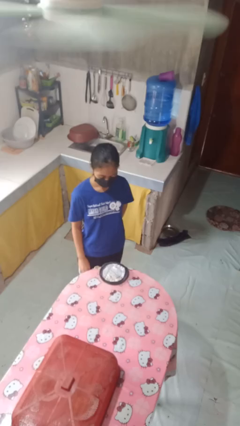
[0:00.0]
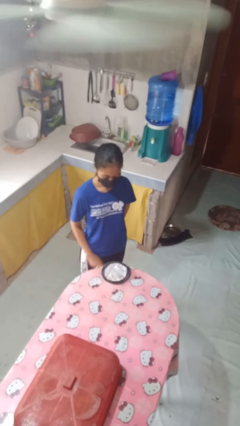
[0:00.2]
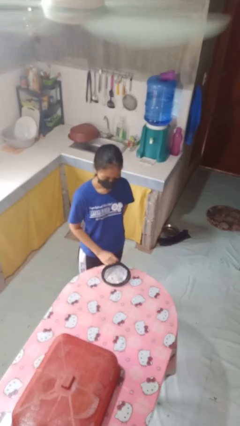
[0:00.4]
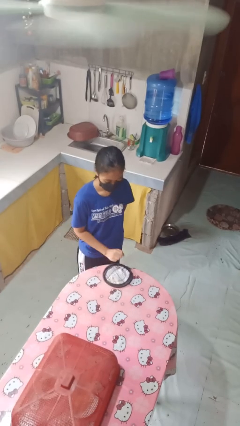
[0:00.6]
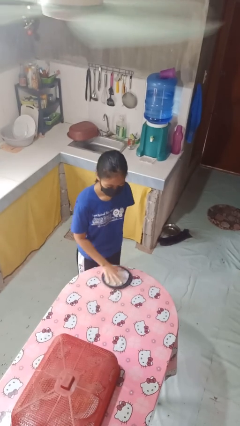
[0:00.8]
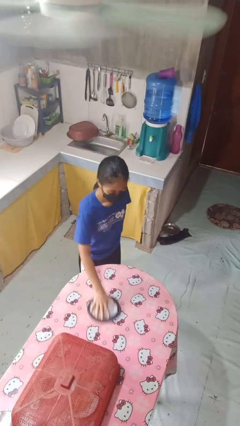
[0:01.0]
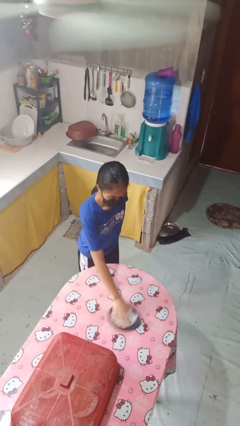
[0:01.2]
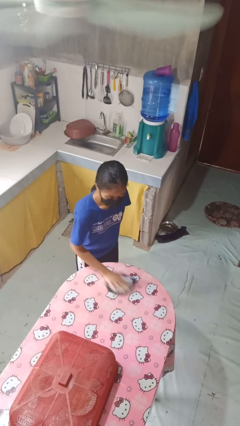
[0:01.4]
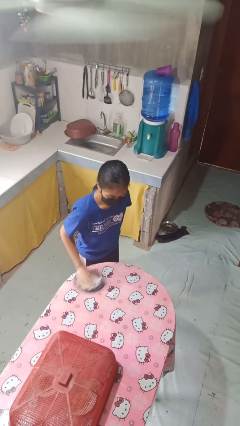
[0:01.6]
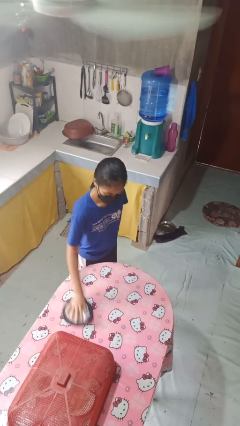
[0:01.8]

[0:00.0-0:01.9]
person cleans table with rag

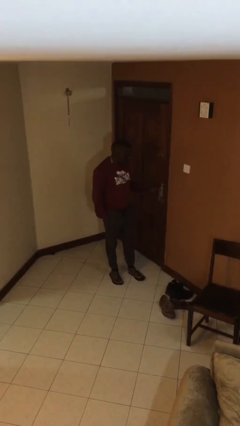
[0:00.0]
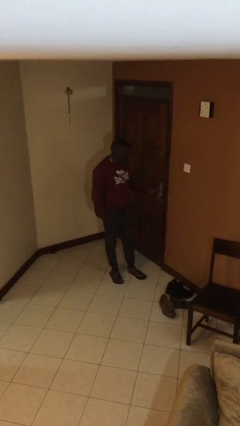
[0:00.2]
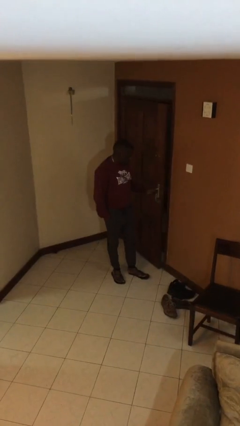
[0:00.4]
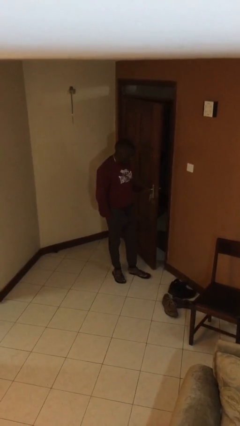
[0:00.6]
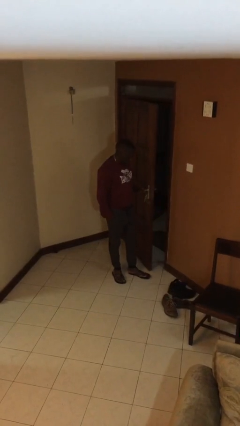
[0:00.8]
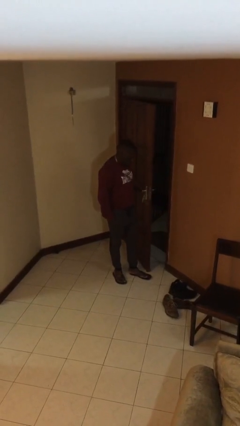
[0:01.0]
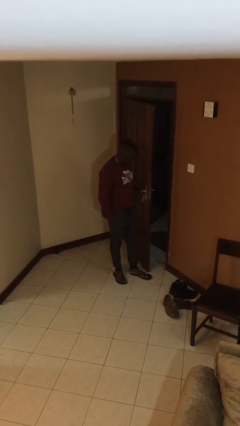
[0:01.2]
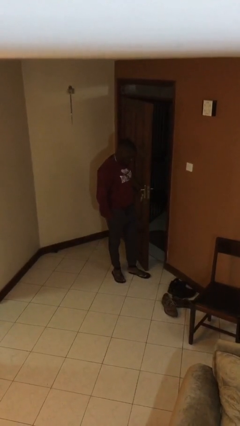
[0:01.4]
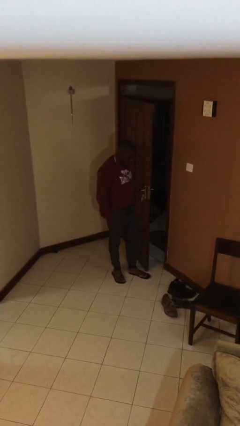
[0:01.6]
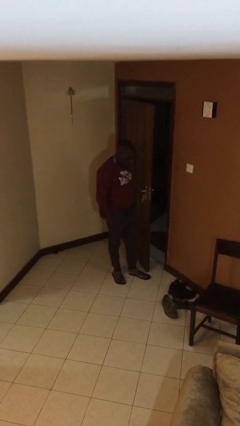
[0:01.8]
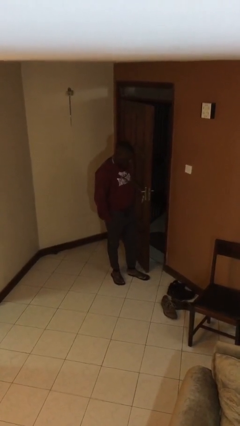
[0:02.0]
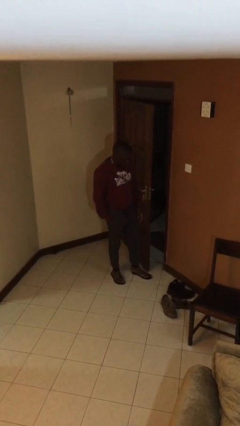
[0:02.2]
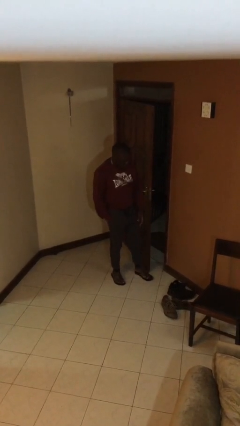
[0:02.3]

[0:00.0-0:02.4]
person opens facility door

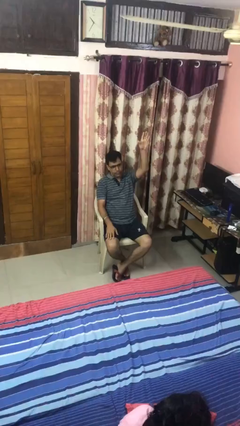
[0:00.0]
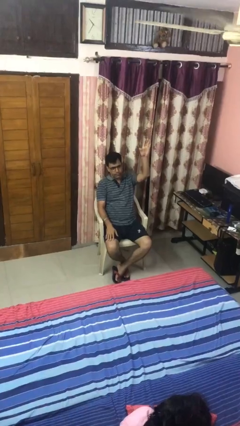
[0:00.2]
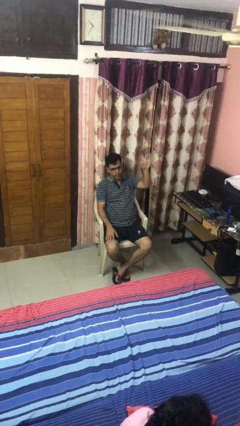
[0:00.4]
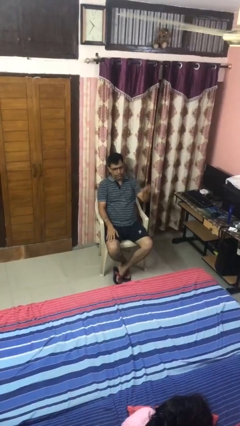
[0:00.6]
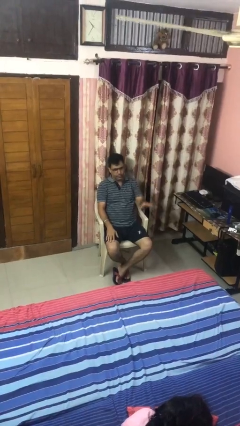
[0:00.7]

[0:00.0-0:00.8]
person gestures lower hand

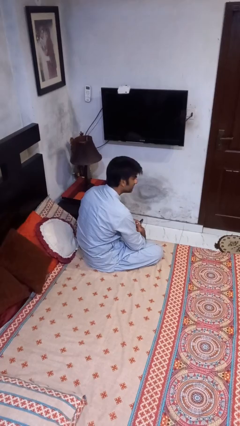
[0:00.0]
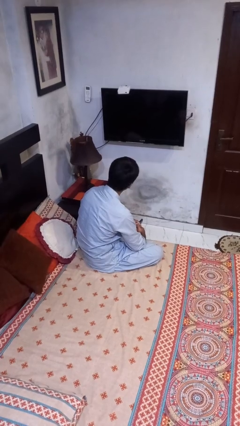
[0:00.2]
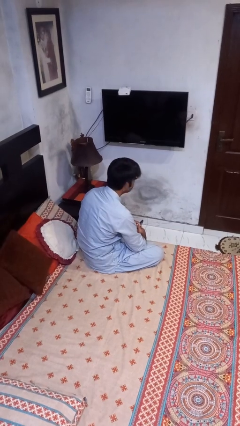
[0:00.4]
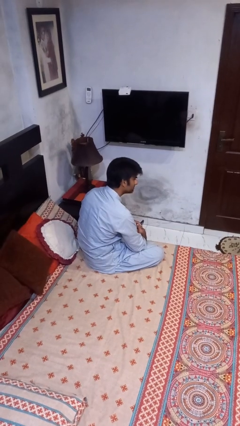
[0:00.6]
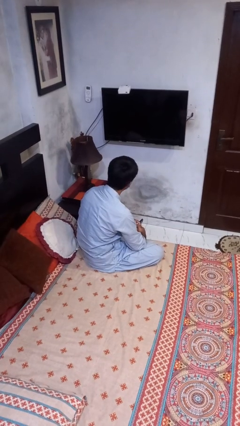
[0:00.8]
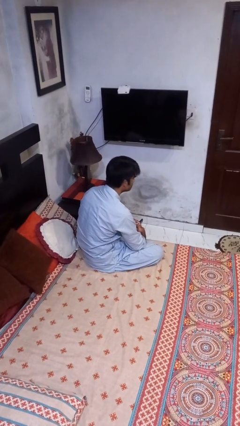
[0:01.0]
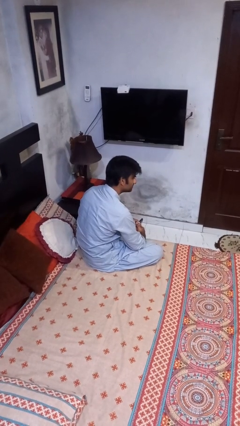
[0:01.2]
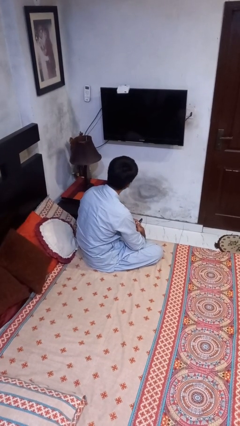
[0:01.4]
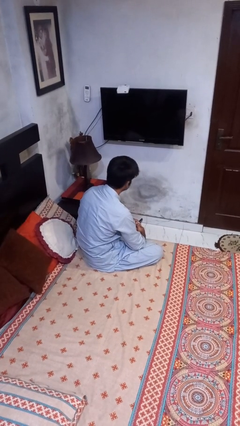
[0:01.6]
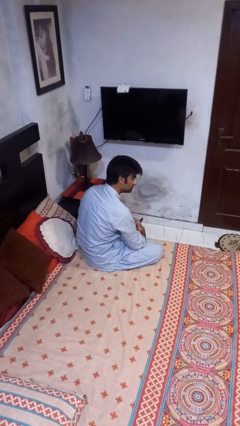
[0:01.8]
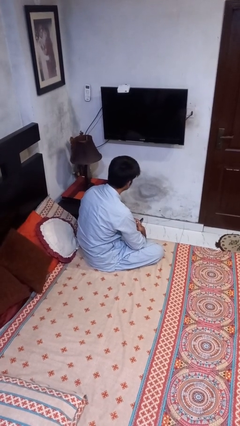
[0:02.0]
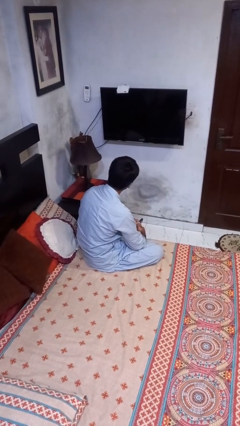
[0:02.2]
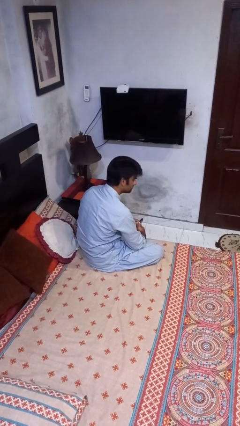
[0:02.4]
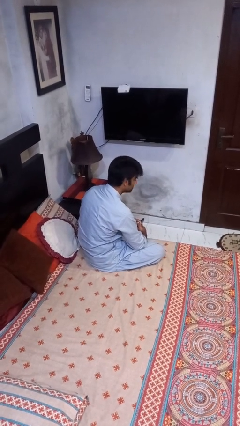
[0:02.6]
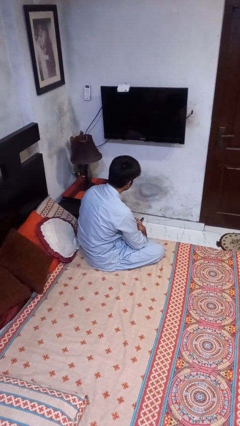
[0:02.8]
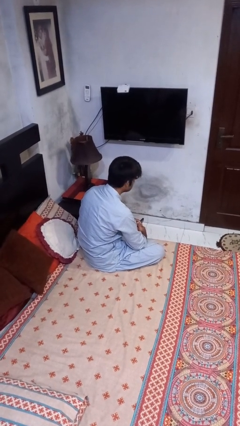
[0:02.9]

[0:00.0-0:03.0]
person shakes head

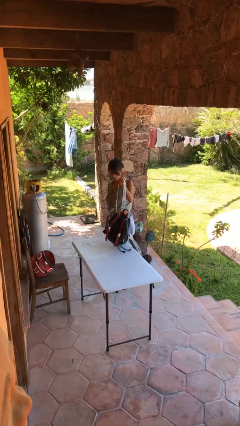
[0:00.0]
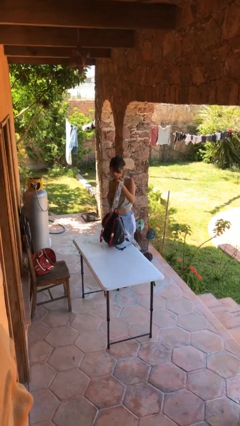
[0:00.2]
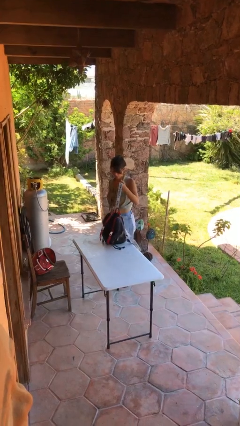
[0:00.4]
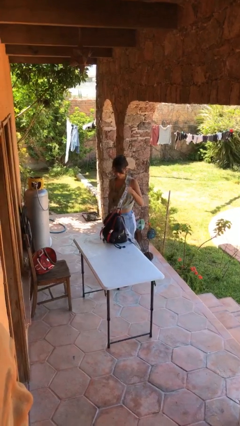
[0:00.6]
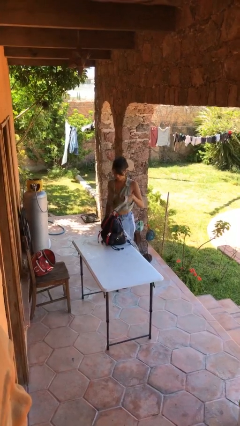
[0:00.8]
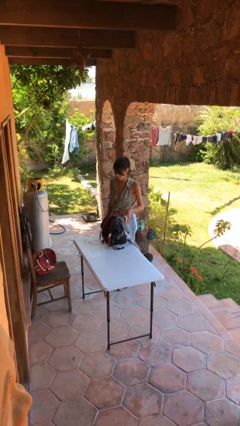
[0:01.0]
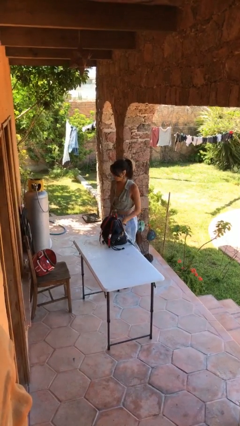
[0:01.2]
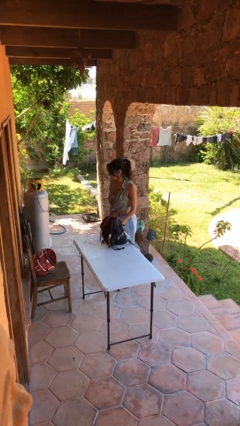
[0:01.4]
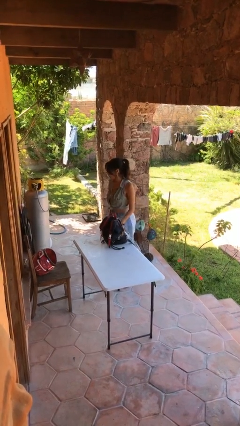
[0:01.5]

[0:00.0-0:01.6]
person puts down object on table

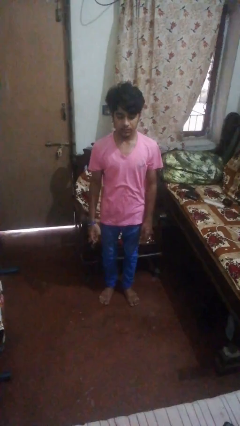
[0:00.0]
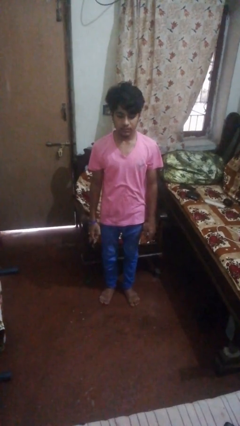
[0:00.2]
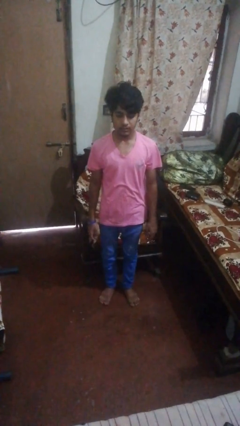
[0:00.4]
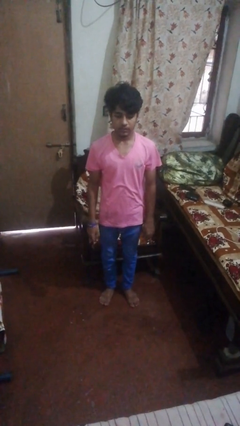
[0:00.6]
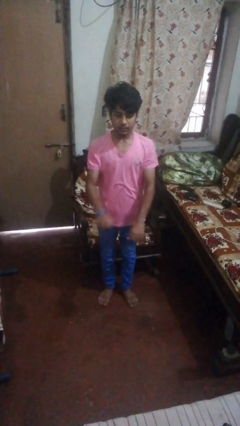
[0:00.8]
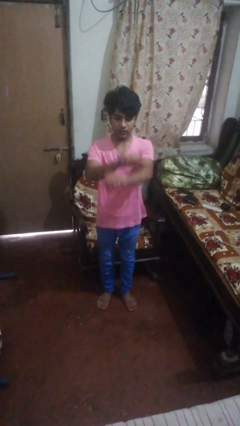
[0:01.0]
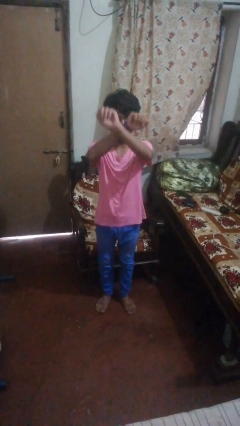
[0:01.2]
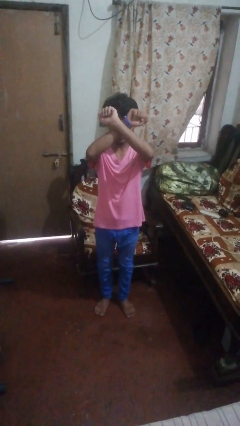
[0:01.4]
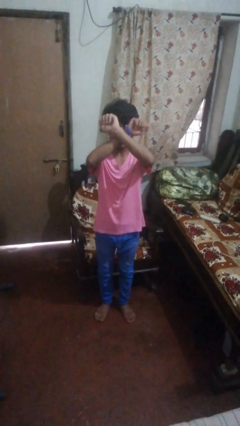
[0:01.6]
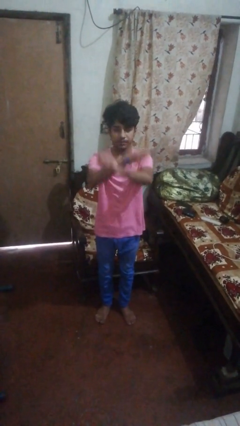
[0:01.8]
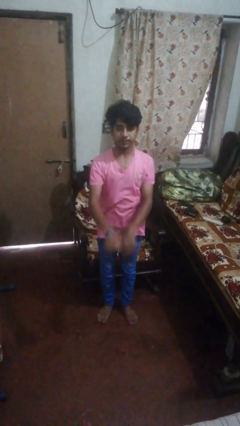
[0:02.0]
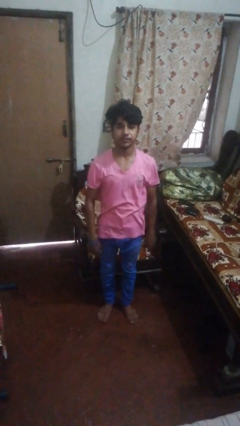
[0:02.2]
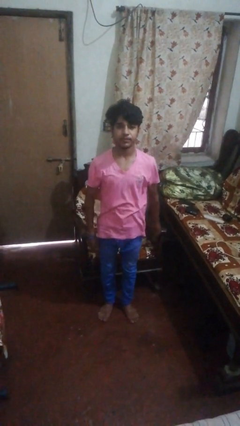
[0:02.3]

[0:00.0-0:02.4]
person karate chop

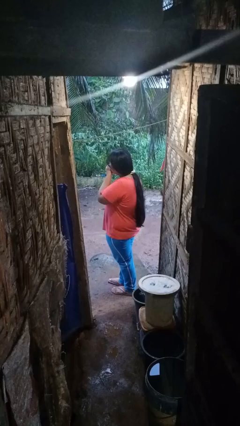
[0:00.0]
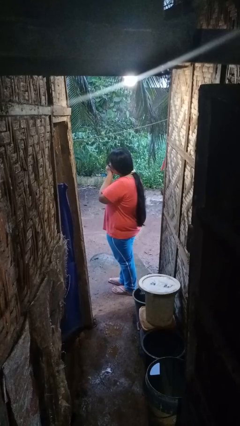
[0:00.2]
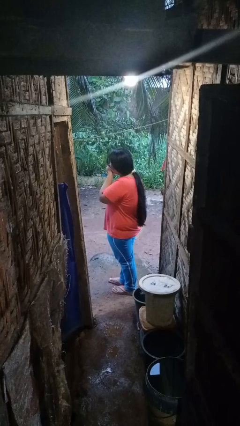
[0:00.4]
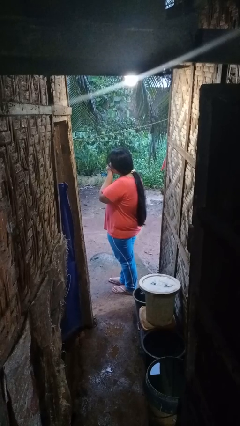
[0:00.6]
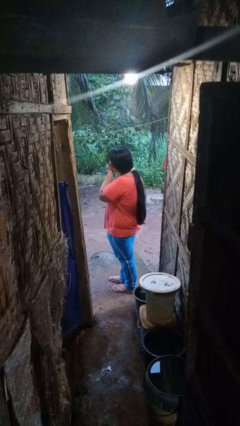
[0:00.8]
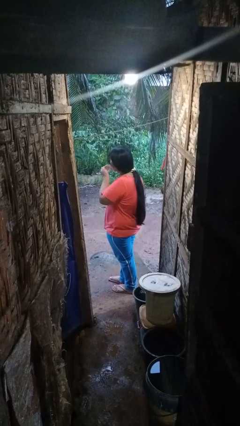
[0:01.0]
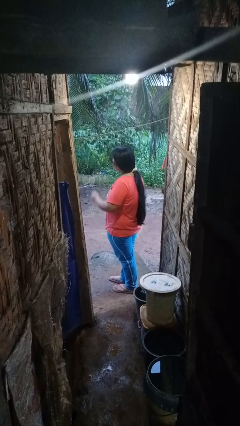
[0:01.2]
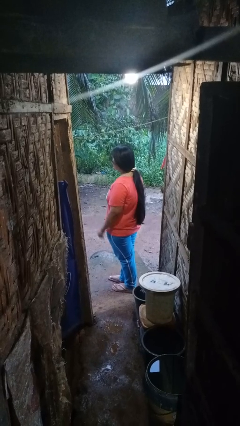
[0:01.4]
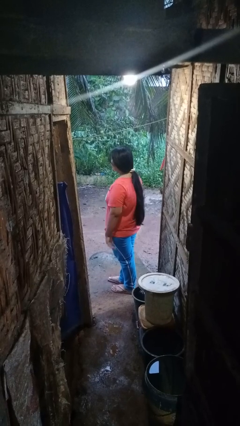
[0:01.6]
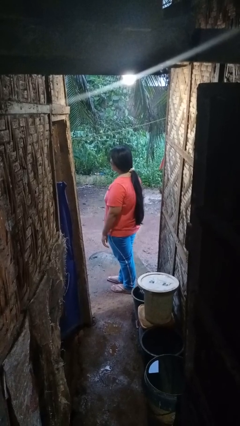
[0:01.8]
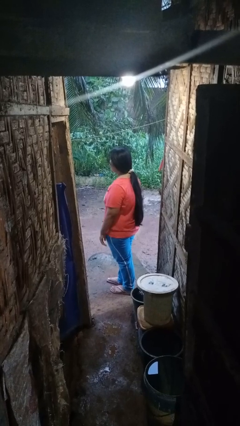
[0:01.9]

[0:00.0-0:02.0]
person blows into hands

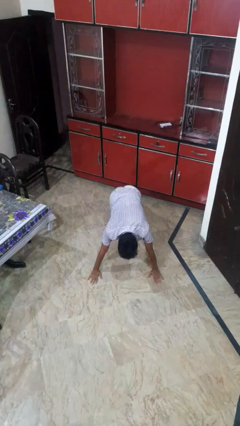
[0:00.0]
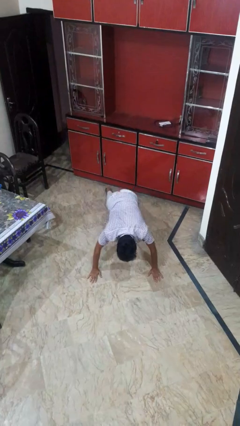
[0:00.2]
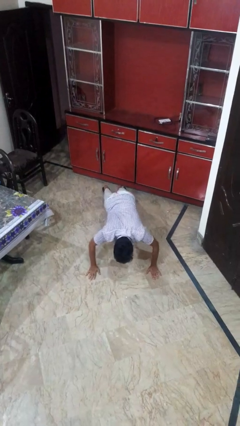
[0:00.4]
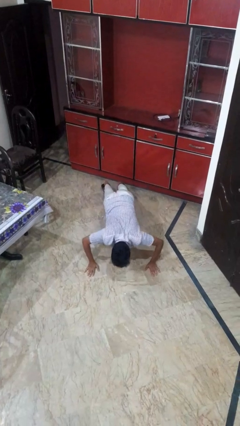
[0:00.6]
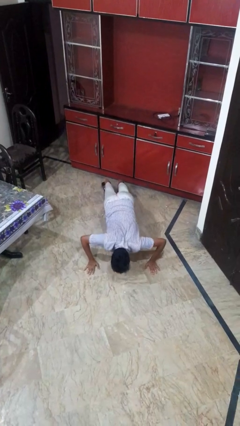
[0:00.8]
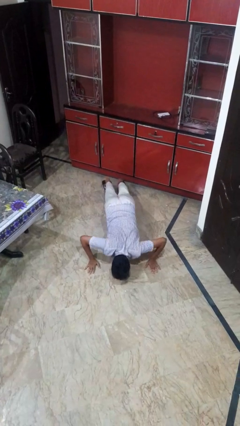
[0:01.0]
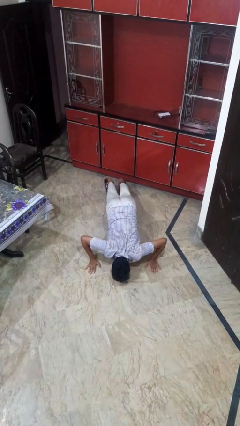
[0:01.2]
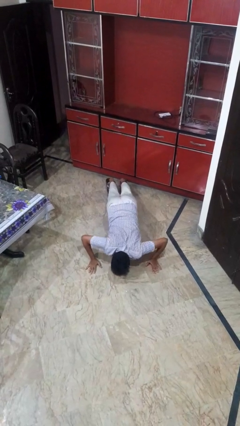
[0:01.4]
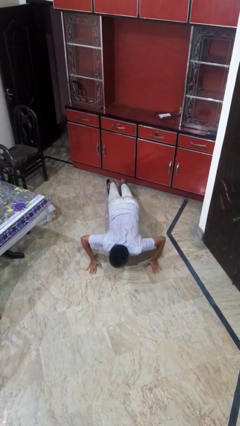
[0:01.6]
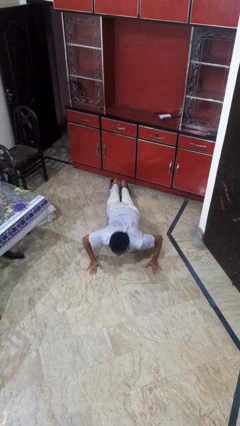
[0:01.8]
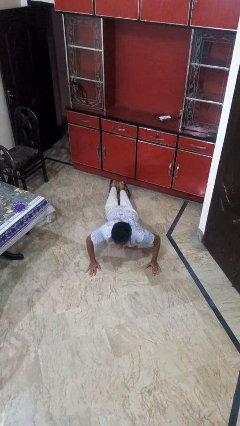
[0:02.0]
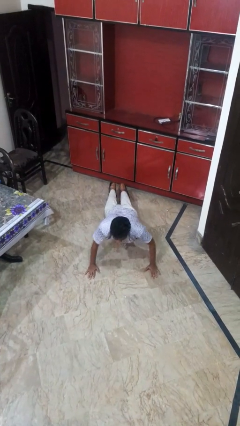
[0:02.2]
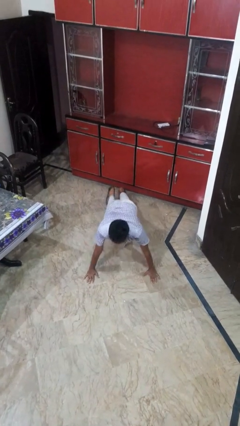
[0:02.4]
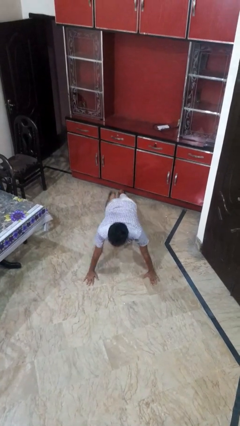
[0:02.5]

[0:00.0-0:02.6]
person exercises with pushup
